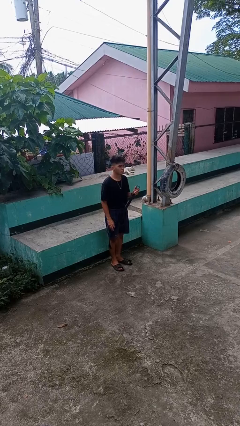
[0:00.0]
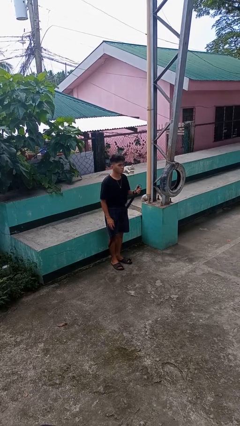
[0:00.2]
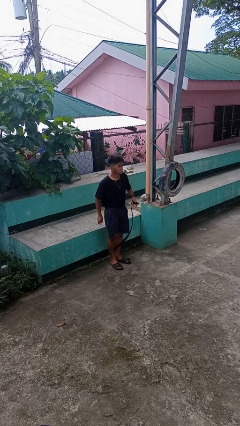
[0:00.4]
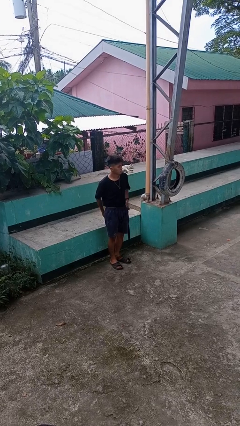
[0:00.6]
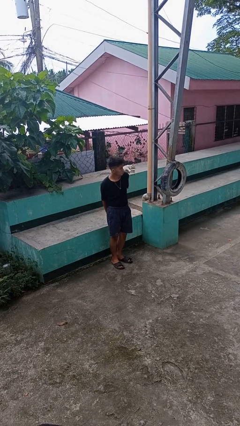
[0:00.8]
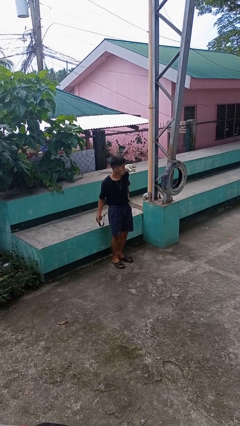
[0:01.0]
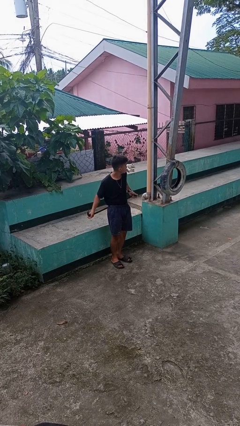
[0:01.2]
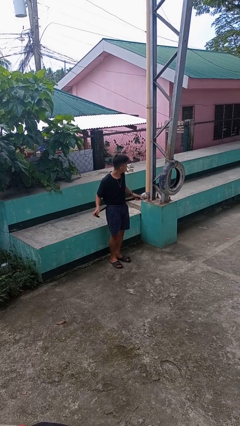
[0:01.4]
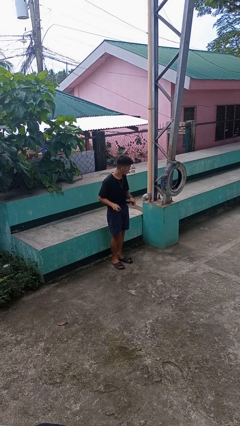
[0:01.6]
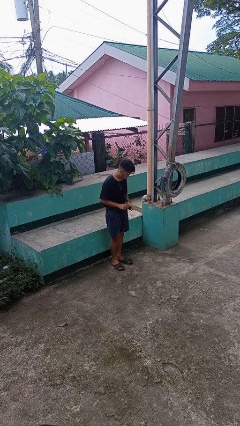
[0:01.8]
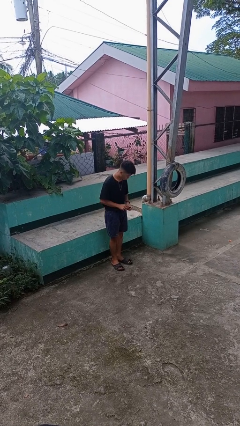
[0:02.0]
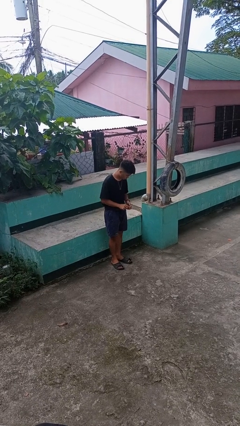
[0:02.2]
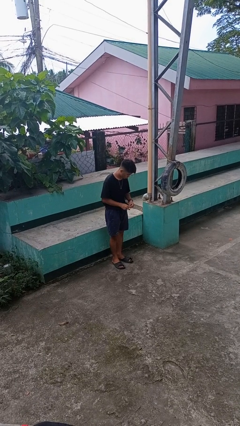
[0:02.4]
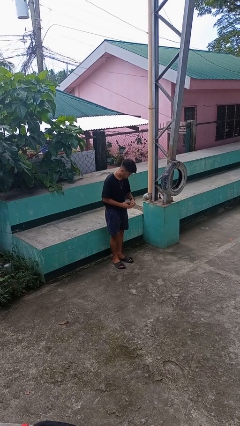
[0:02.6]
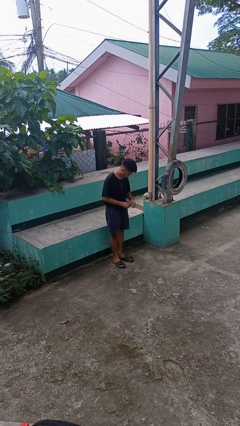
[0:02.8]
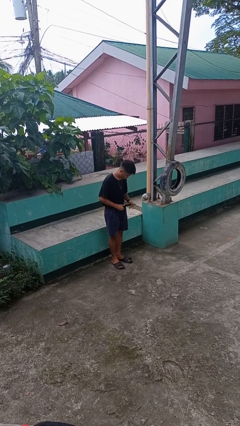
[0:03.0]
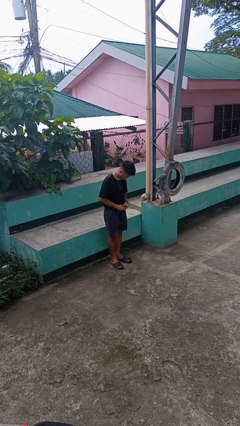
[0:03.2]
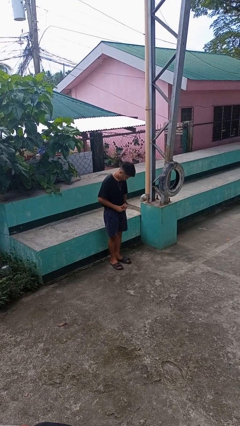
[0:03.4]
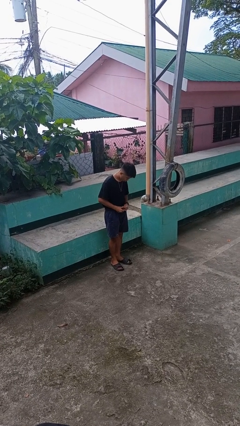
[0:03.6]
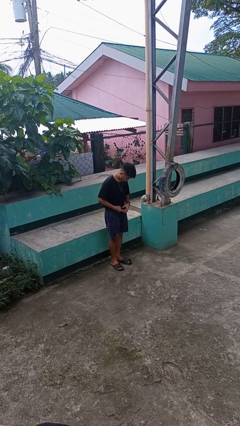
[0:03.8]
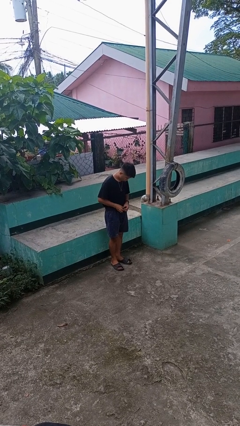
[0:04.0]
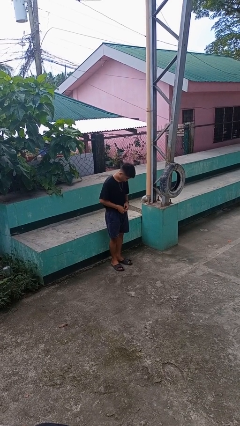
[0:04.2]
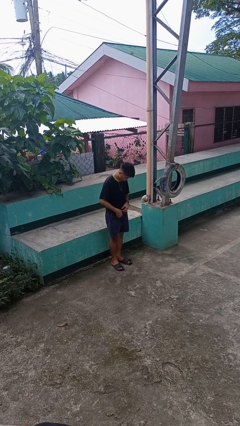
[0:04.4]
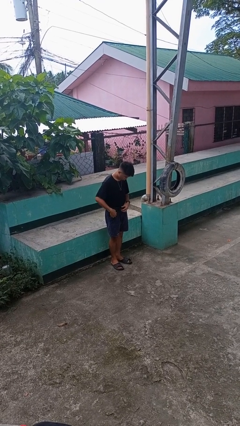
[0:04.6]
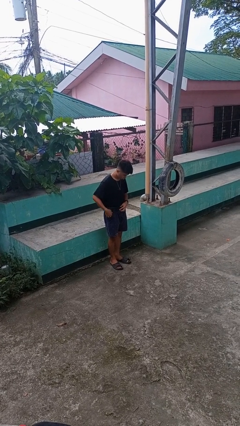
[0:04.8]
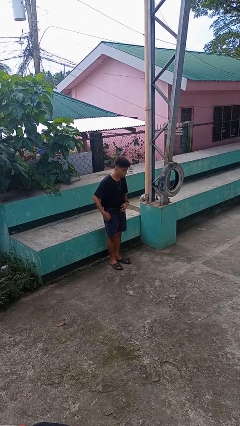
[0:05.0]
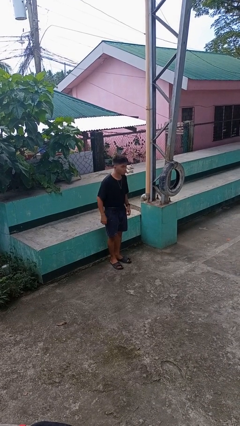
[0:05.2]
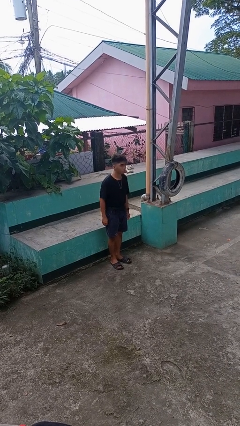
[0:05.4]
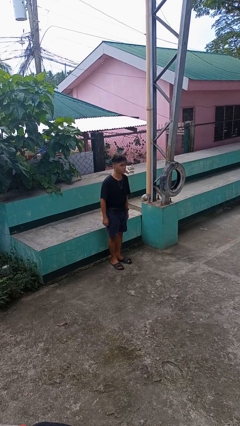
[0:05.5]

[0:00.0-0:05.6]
person puts on belt

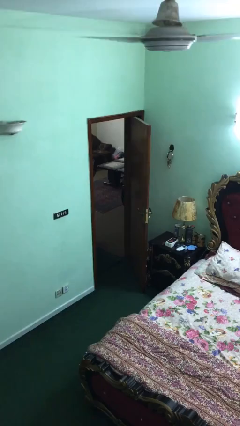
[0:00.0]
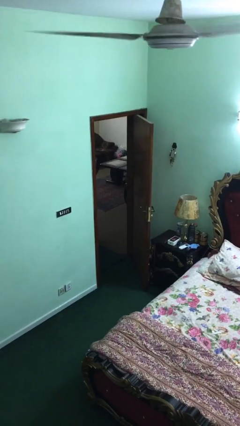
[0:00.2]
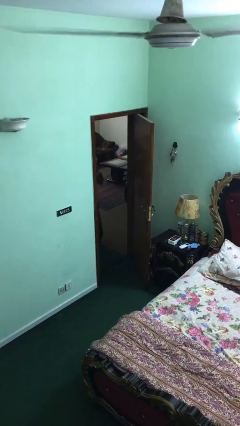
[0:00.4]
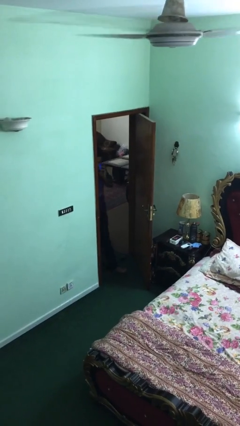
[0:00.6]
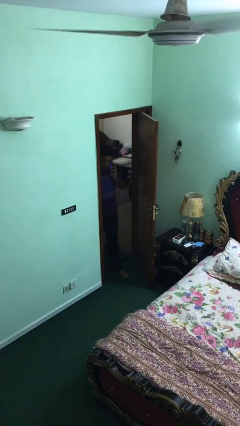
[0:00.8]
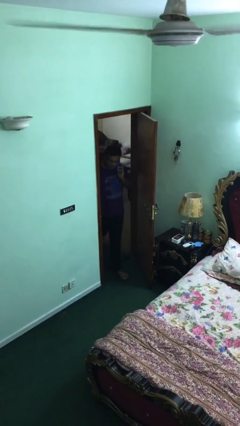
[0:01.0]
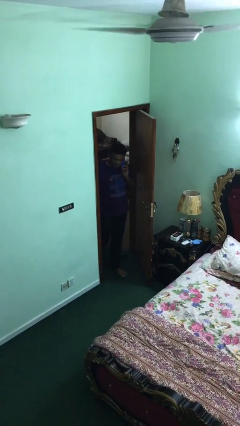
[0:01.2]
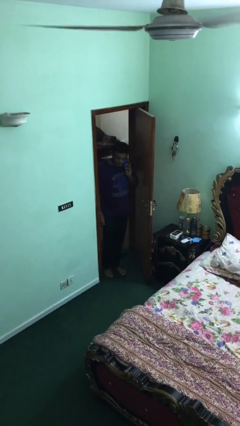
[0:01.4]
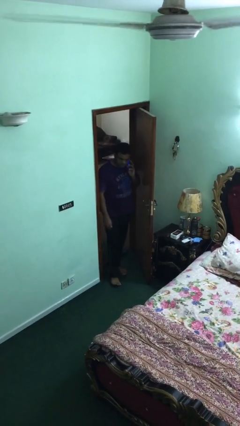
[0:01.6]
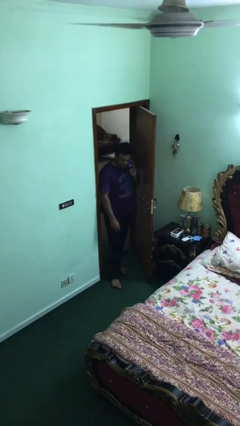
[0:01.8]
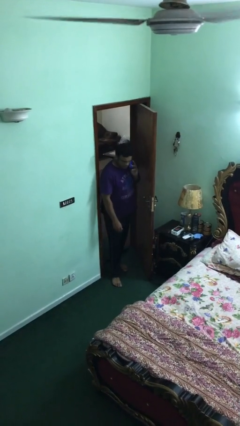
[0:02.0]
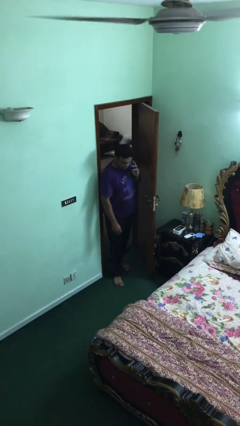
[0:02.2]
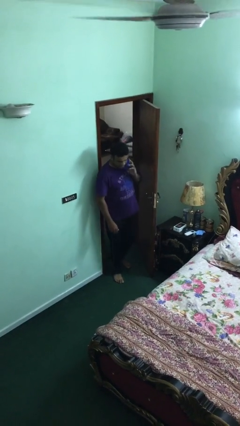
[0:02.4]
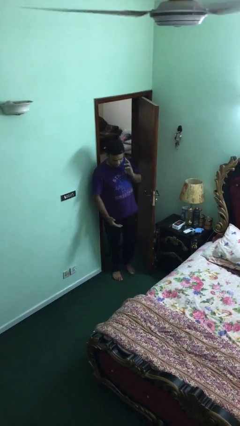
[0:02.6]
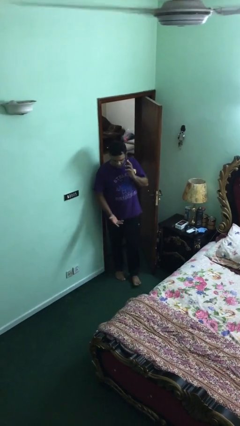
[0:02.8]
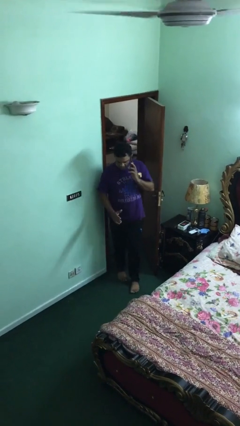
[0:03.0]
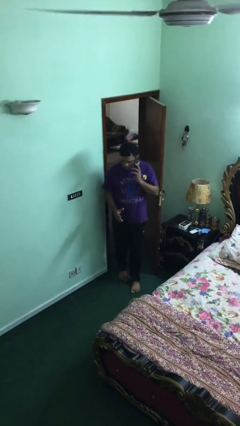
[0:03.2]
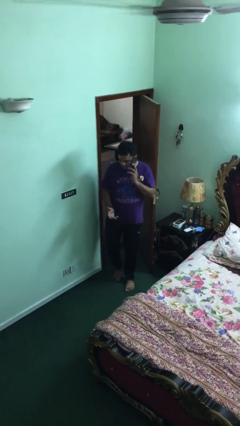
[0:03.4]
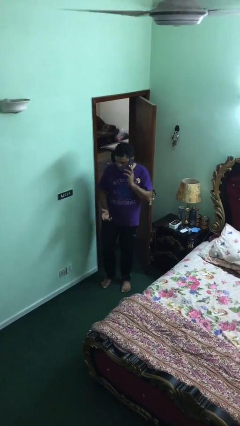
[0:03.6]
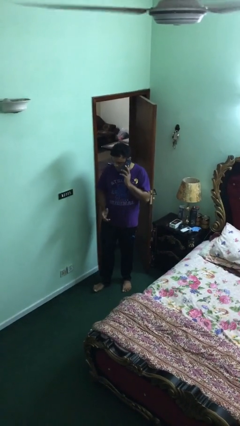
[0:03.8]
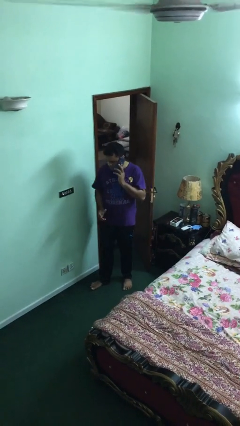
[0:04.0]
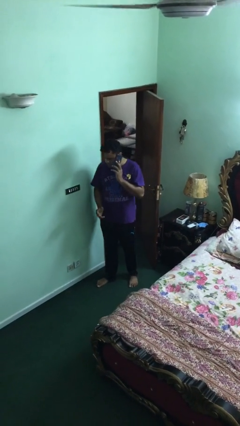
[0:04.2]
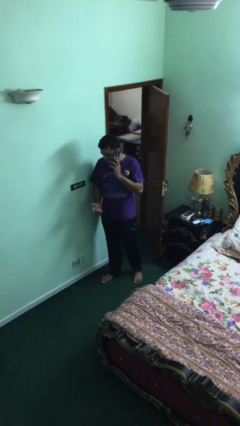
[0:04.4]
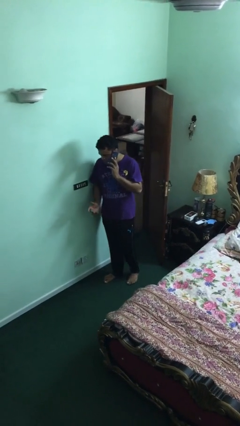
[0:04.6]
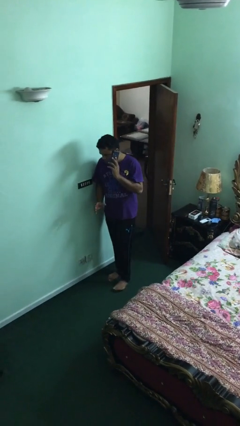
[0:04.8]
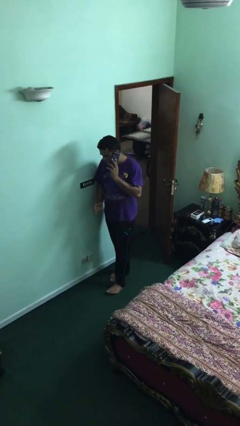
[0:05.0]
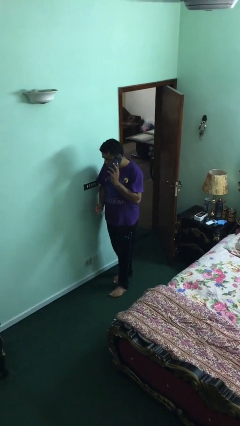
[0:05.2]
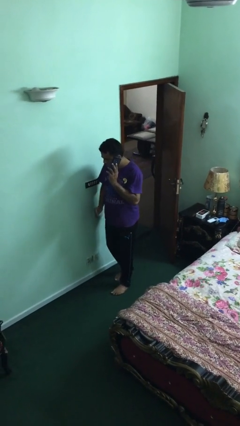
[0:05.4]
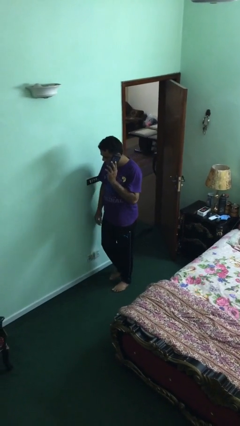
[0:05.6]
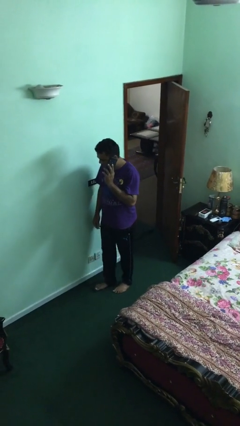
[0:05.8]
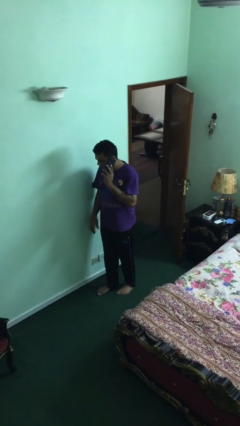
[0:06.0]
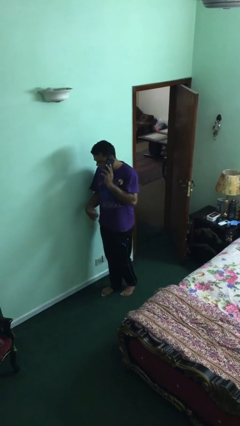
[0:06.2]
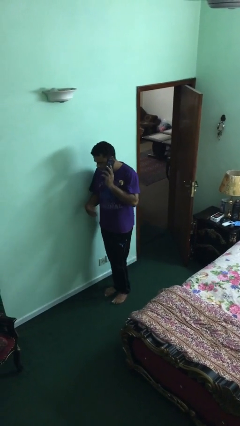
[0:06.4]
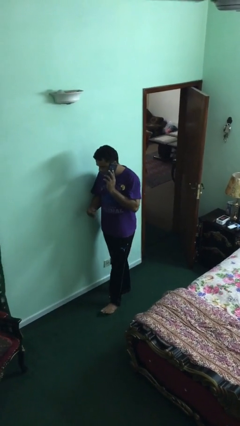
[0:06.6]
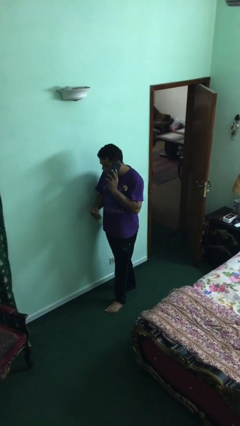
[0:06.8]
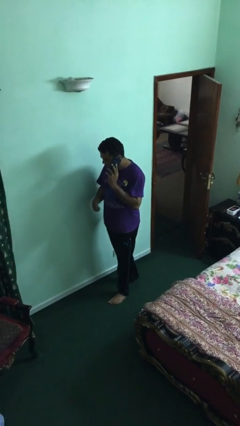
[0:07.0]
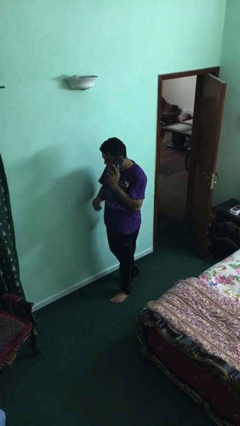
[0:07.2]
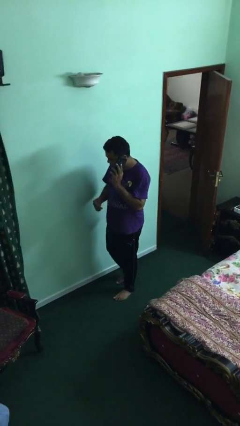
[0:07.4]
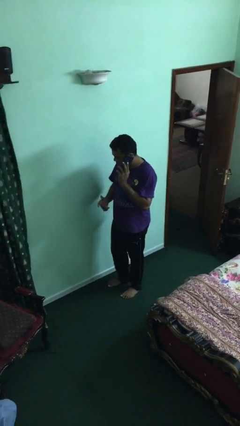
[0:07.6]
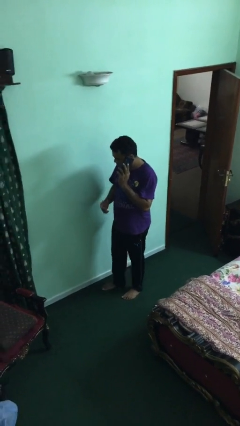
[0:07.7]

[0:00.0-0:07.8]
person enters scene through structure

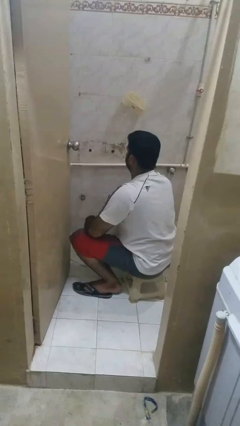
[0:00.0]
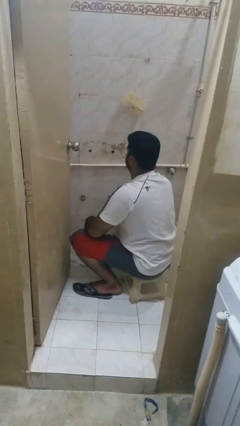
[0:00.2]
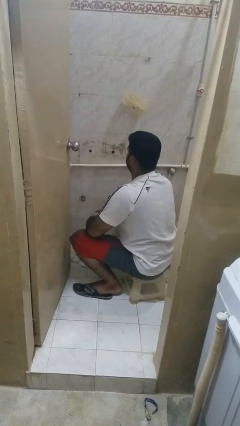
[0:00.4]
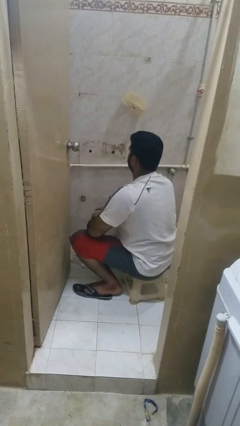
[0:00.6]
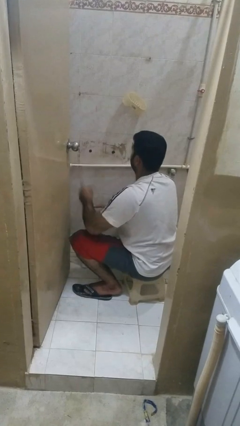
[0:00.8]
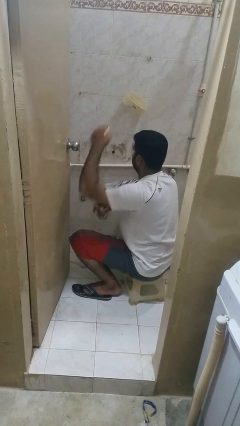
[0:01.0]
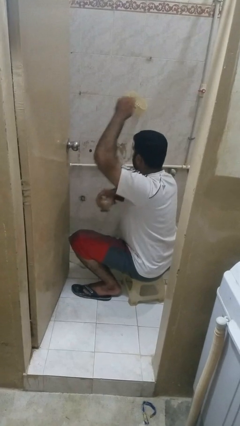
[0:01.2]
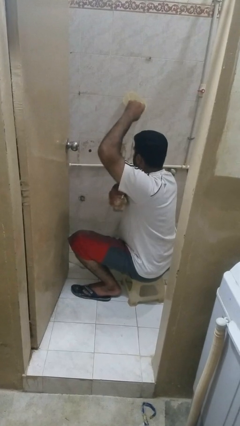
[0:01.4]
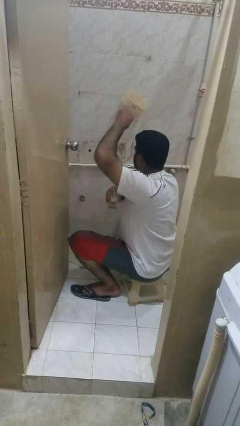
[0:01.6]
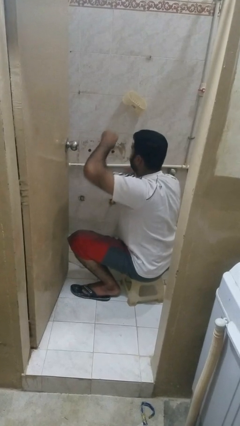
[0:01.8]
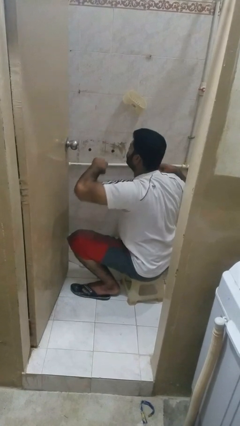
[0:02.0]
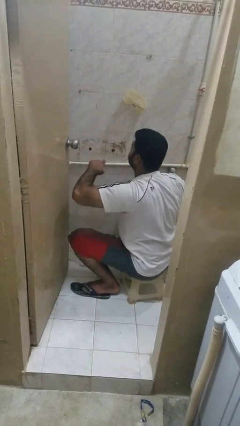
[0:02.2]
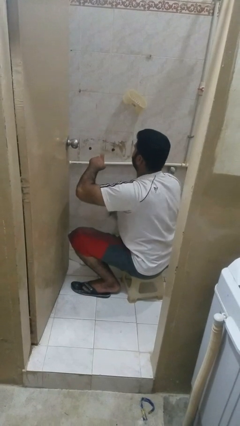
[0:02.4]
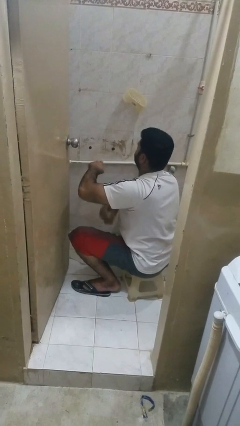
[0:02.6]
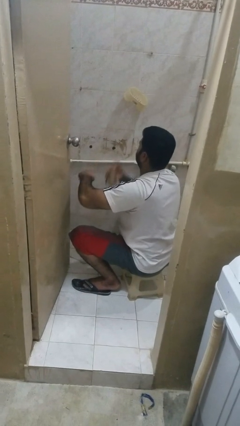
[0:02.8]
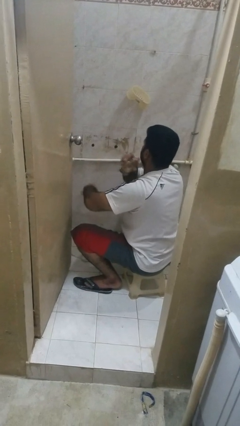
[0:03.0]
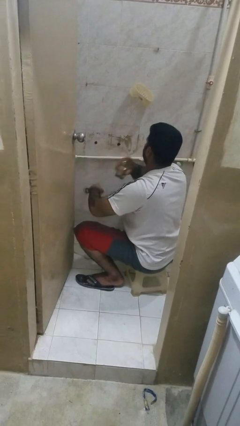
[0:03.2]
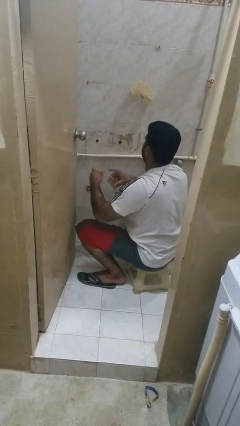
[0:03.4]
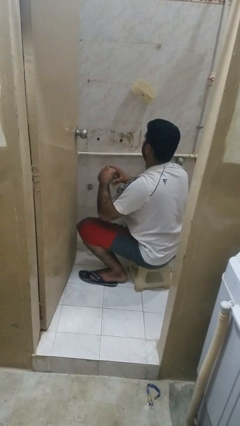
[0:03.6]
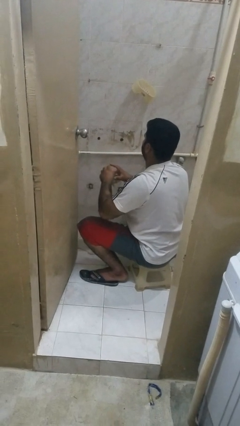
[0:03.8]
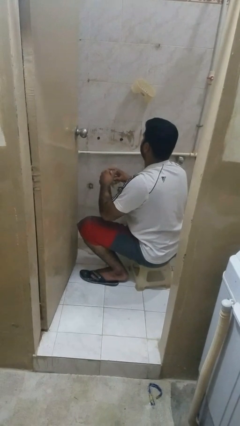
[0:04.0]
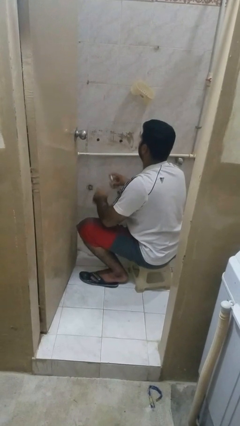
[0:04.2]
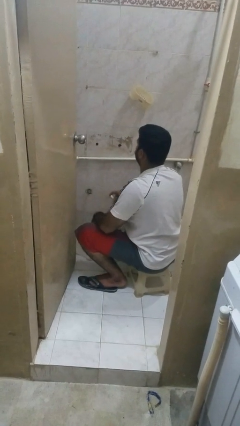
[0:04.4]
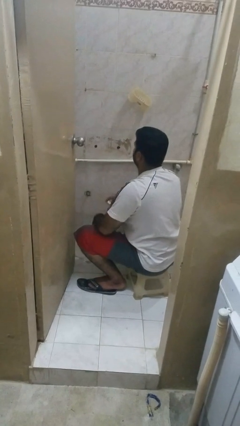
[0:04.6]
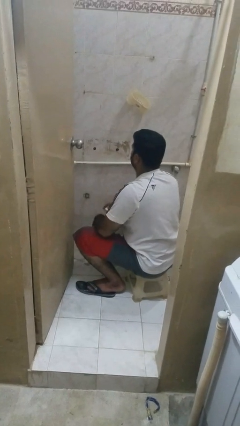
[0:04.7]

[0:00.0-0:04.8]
person applies deodorant

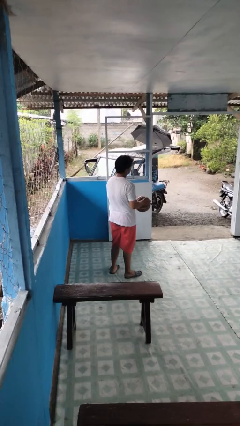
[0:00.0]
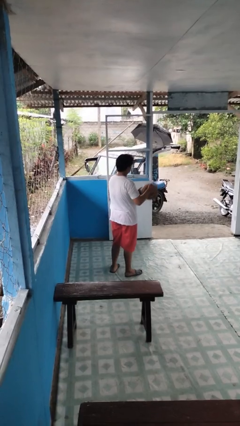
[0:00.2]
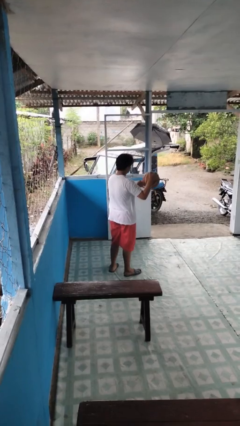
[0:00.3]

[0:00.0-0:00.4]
person bounces ball on floor
